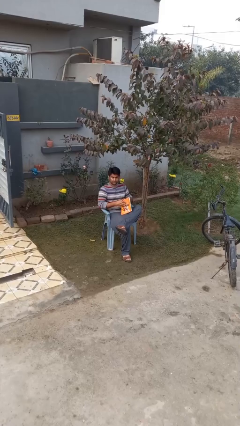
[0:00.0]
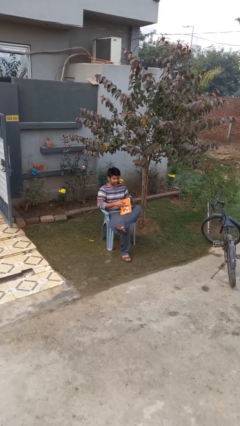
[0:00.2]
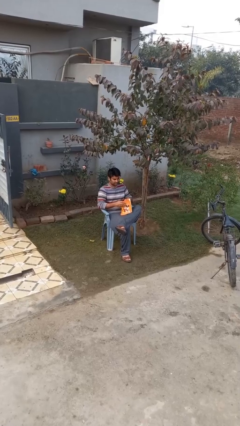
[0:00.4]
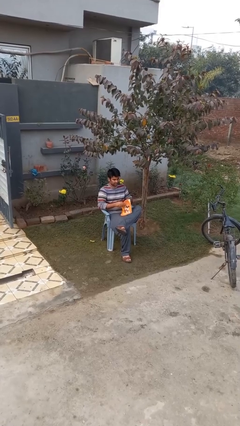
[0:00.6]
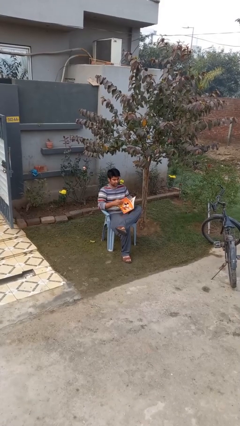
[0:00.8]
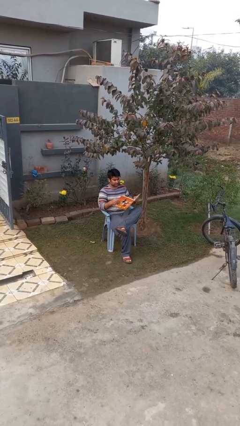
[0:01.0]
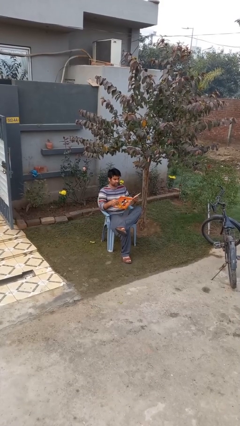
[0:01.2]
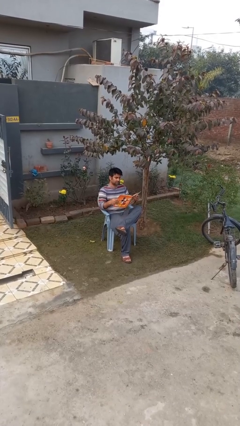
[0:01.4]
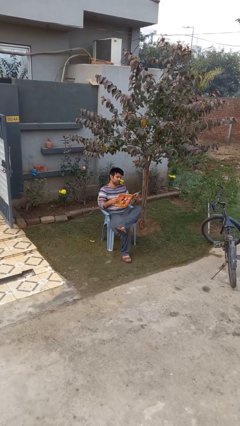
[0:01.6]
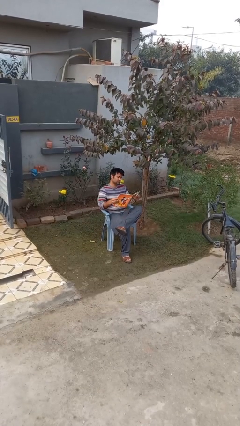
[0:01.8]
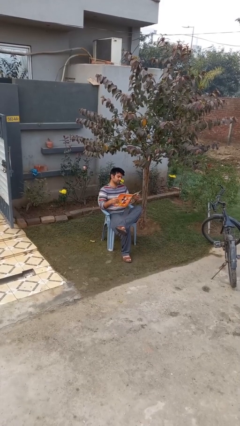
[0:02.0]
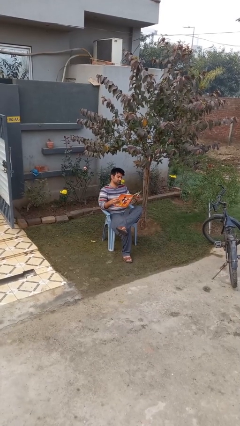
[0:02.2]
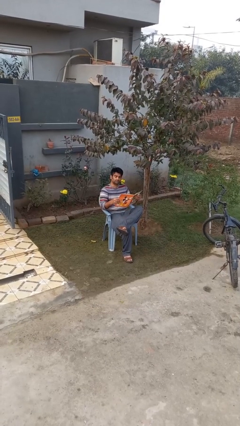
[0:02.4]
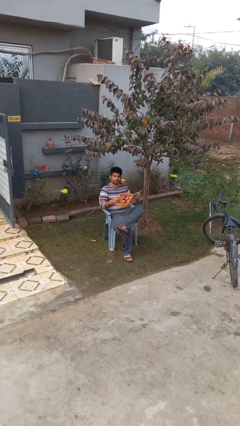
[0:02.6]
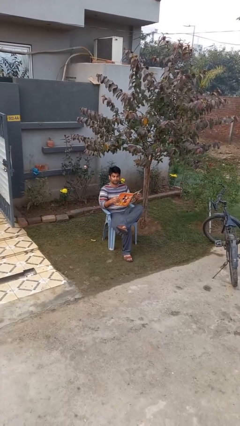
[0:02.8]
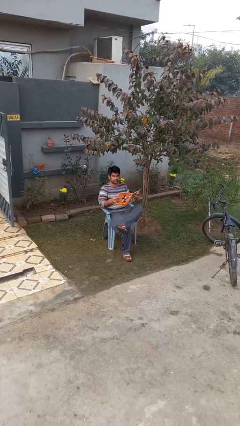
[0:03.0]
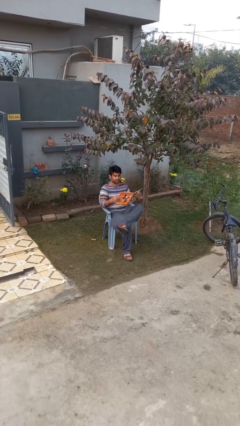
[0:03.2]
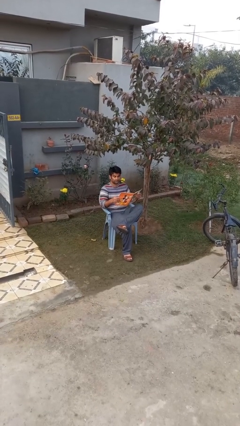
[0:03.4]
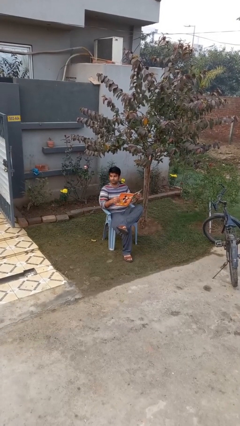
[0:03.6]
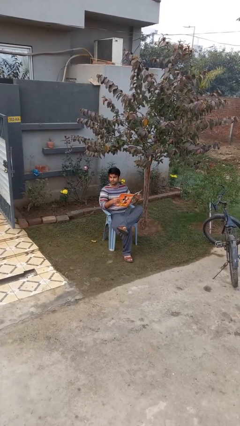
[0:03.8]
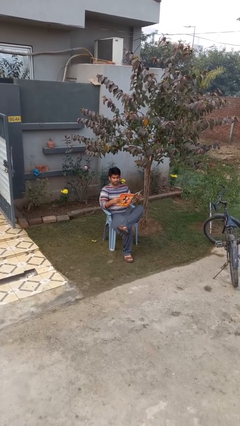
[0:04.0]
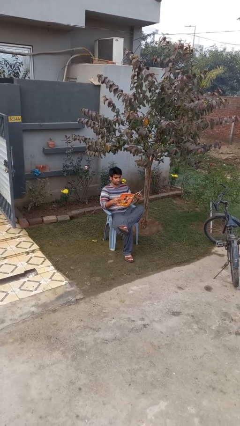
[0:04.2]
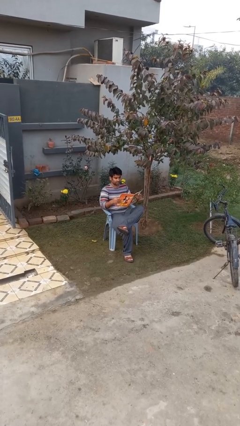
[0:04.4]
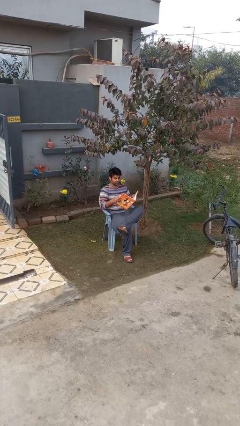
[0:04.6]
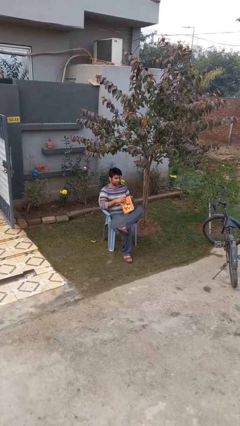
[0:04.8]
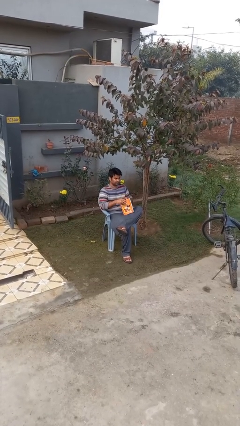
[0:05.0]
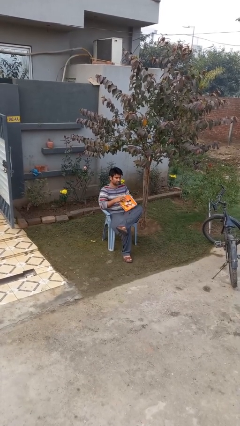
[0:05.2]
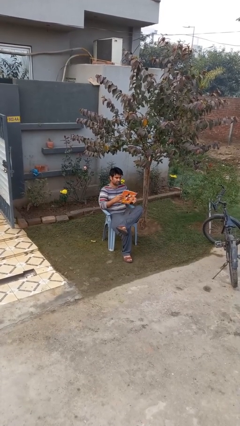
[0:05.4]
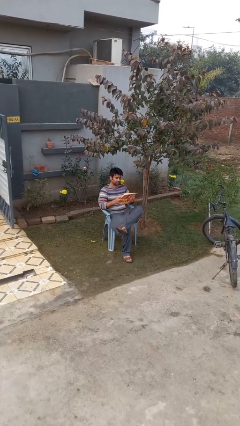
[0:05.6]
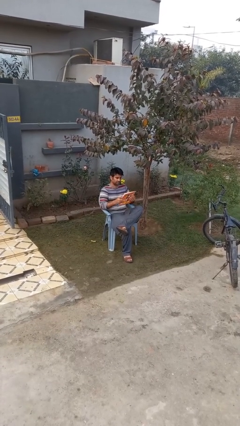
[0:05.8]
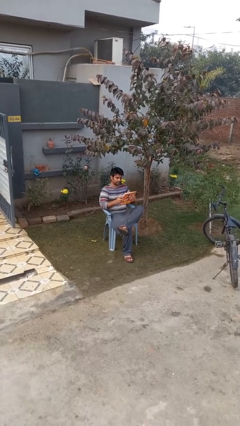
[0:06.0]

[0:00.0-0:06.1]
person reads document

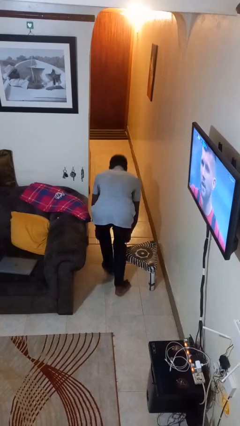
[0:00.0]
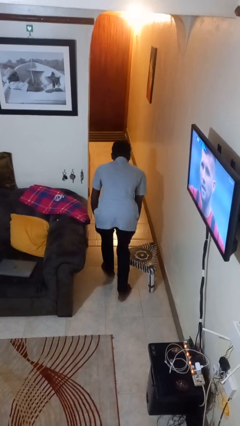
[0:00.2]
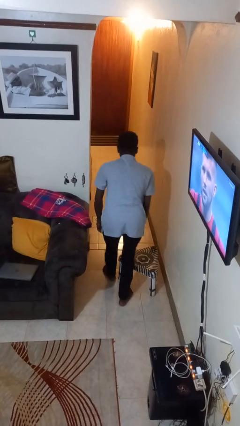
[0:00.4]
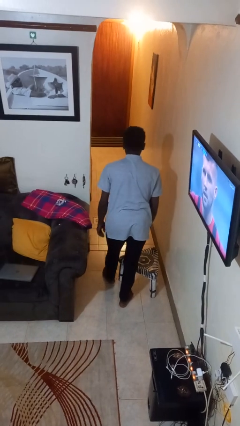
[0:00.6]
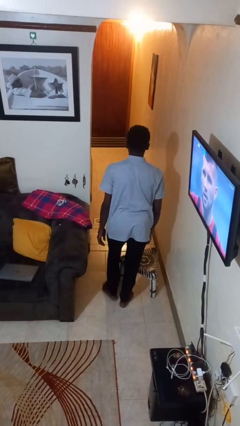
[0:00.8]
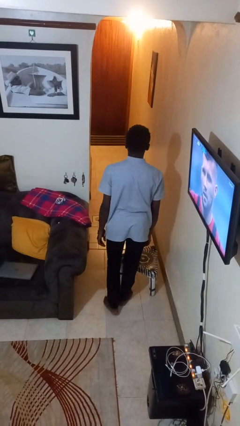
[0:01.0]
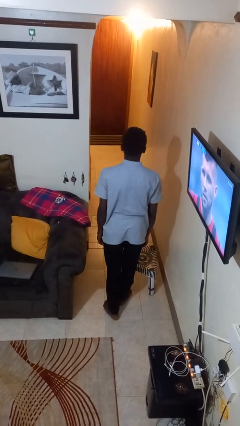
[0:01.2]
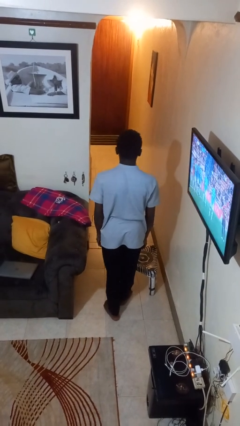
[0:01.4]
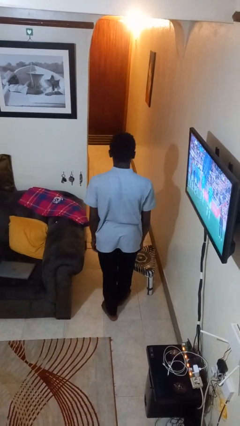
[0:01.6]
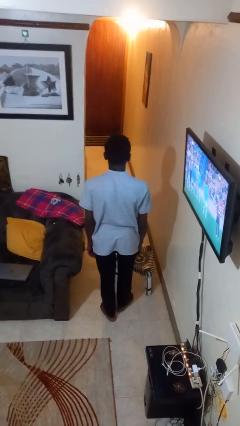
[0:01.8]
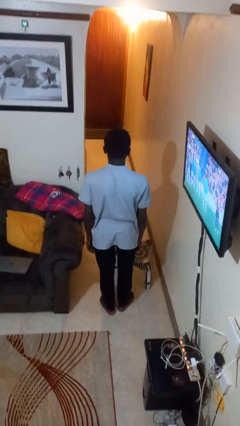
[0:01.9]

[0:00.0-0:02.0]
person stands up from floor

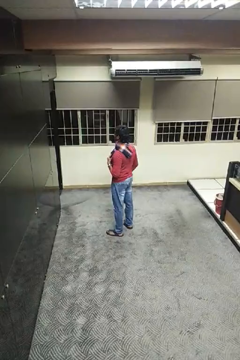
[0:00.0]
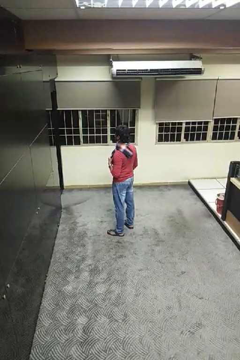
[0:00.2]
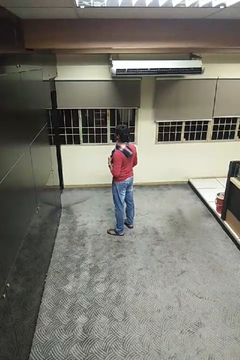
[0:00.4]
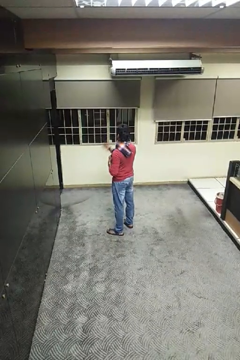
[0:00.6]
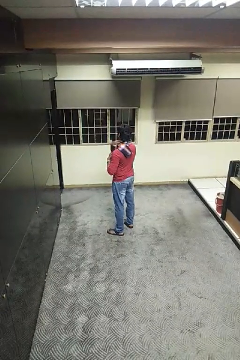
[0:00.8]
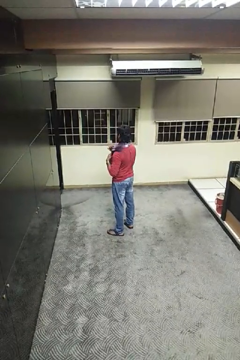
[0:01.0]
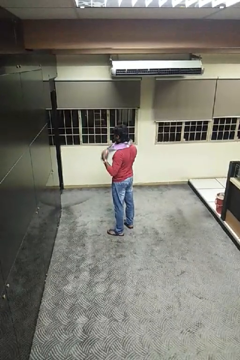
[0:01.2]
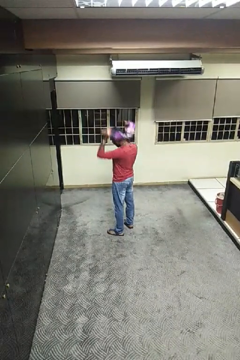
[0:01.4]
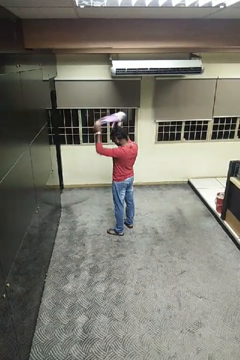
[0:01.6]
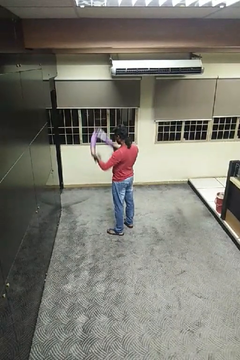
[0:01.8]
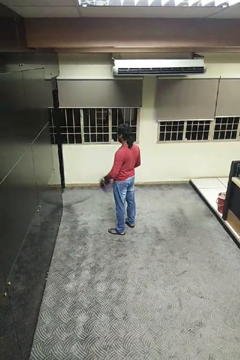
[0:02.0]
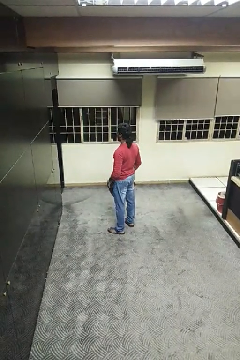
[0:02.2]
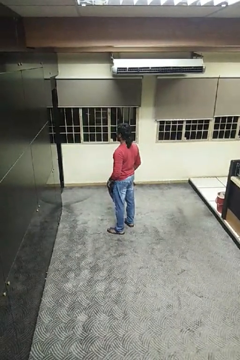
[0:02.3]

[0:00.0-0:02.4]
person takes off scarf

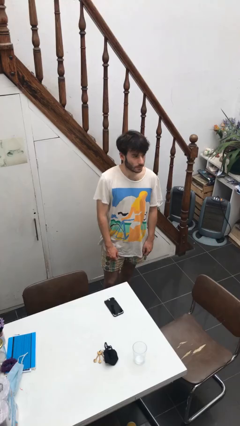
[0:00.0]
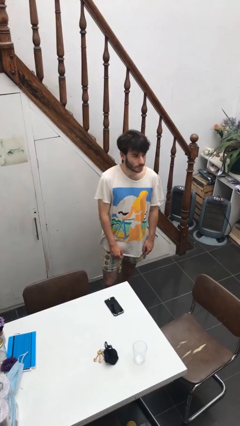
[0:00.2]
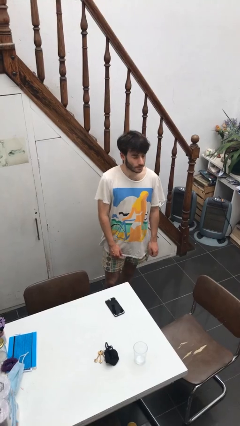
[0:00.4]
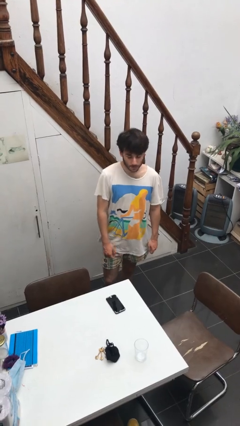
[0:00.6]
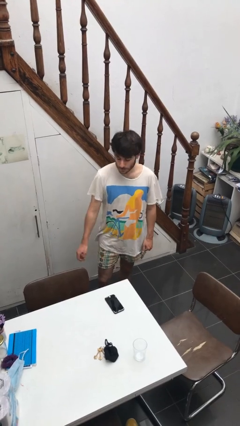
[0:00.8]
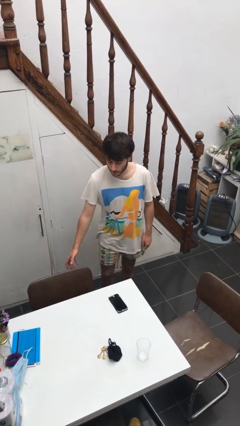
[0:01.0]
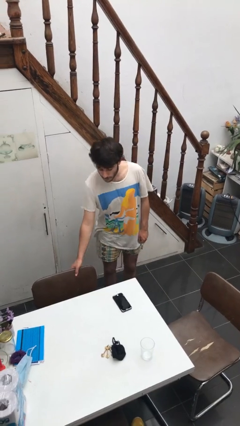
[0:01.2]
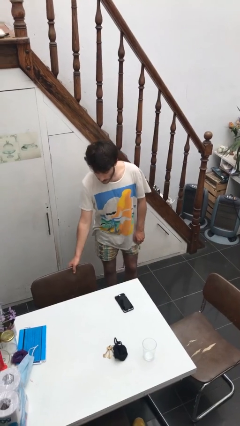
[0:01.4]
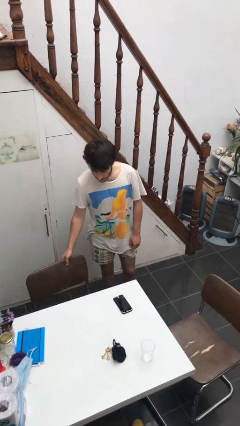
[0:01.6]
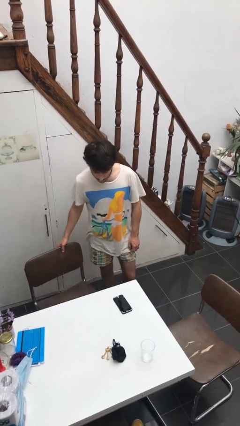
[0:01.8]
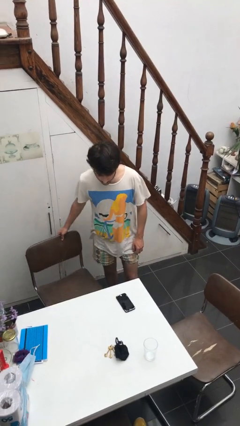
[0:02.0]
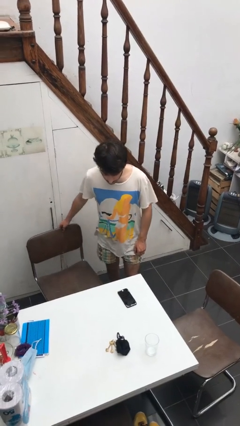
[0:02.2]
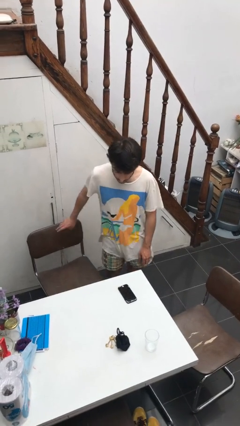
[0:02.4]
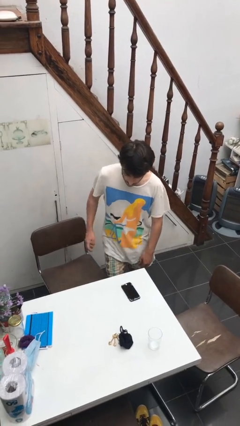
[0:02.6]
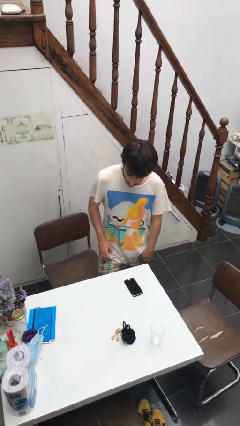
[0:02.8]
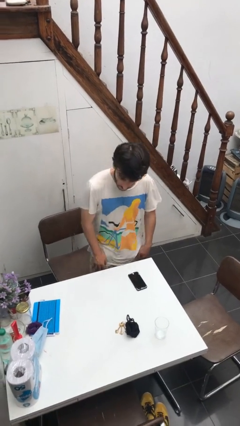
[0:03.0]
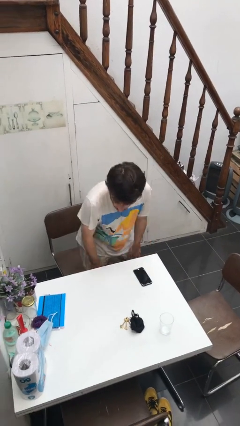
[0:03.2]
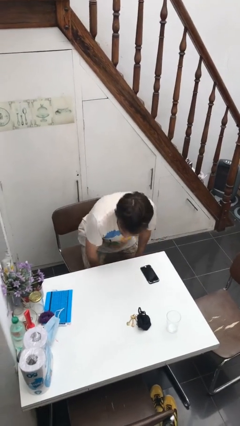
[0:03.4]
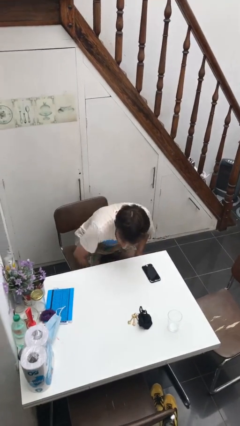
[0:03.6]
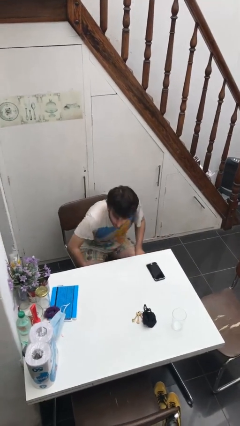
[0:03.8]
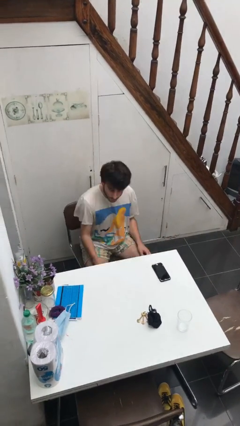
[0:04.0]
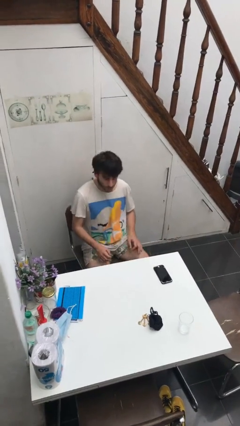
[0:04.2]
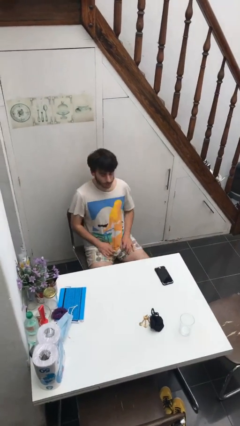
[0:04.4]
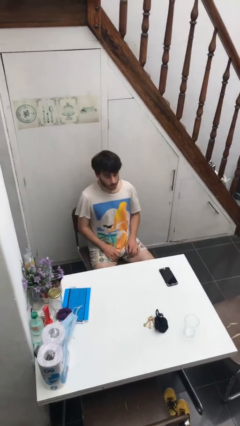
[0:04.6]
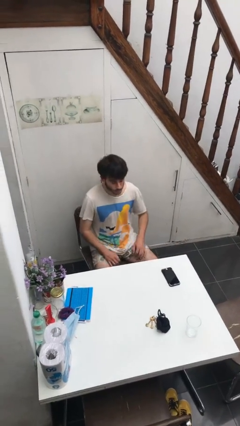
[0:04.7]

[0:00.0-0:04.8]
person sits down

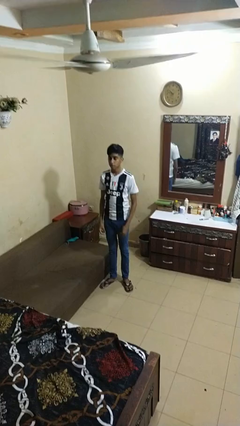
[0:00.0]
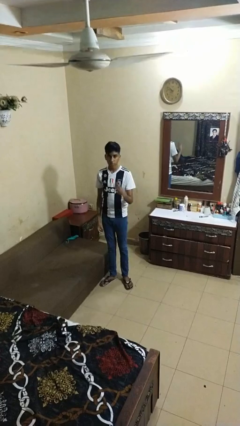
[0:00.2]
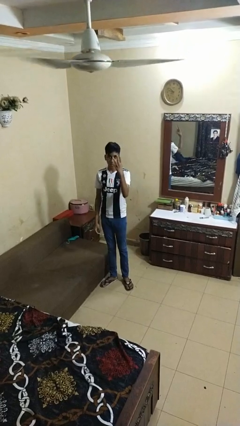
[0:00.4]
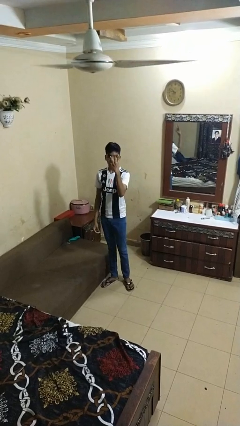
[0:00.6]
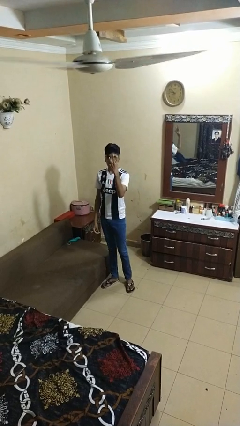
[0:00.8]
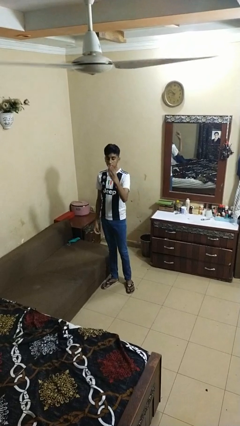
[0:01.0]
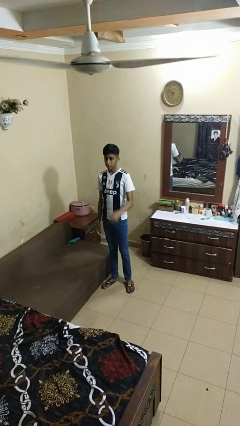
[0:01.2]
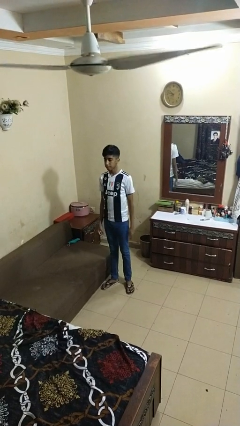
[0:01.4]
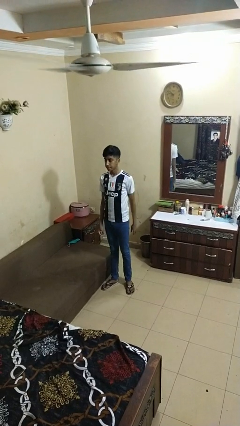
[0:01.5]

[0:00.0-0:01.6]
person gestures number three

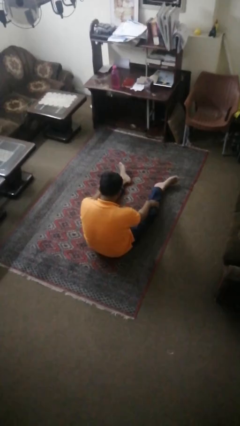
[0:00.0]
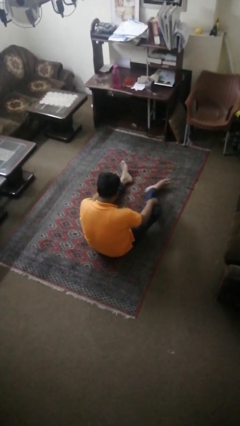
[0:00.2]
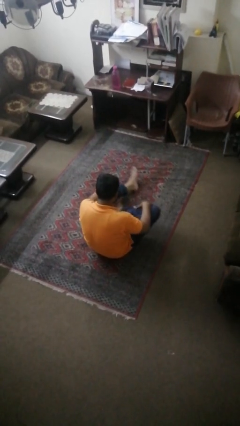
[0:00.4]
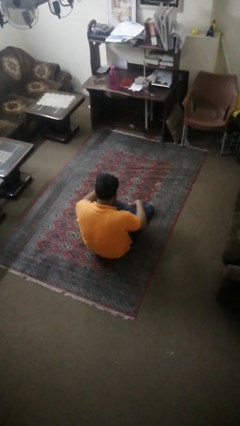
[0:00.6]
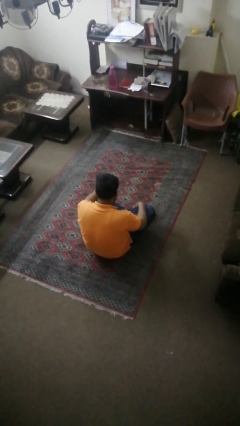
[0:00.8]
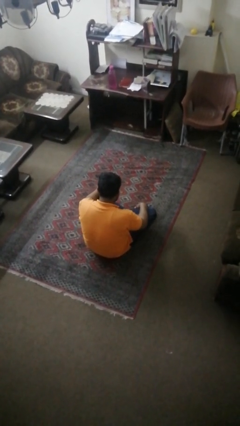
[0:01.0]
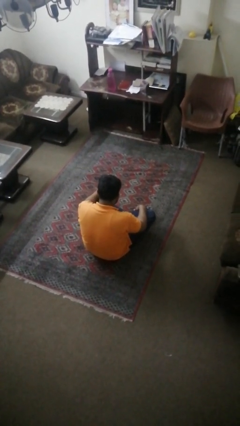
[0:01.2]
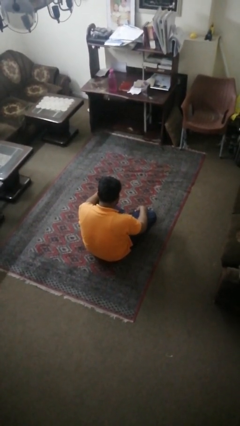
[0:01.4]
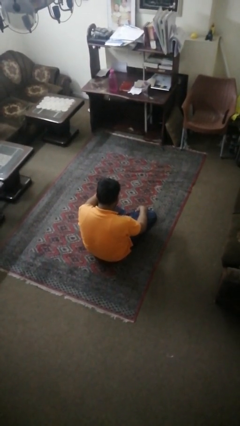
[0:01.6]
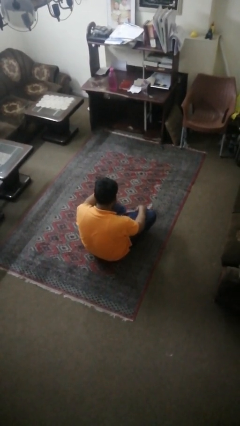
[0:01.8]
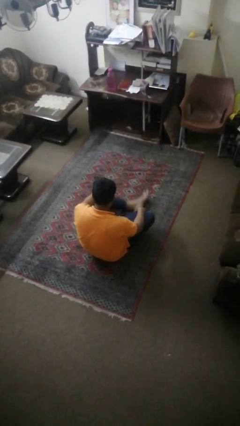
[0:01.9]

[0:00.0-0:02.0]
person crosses legs
